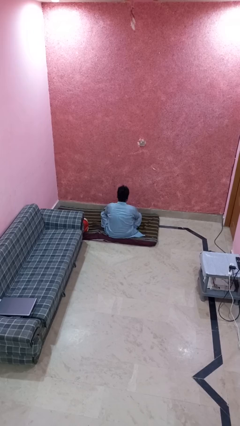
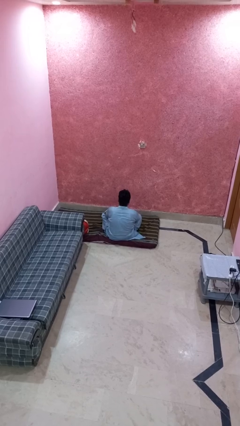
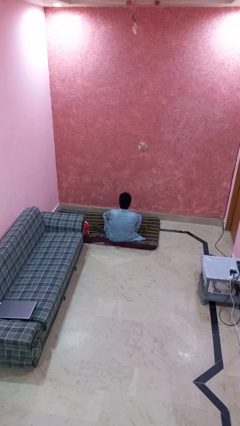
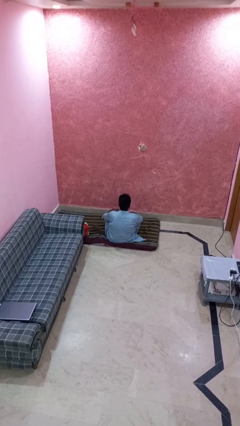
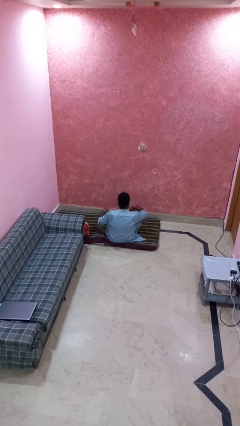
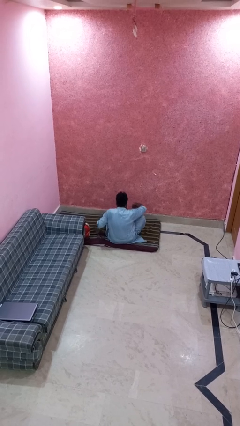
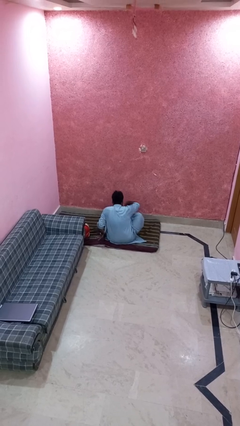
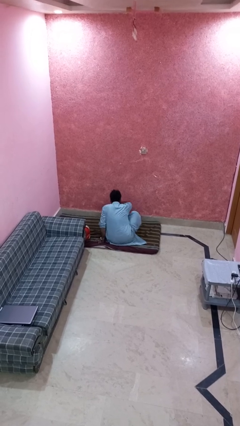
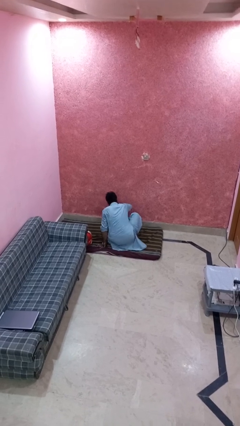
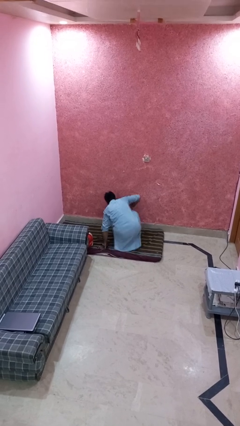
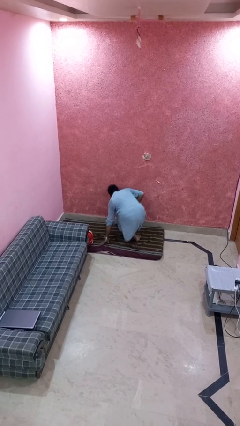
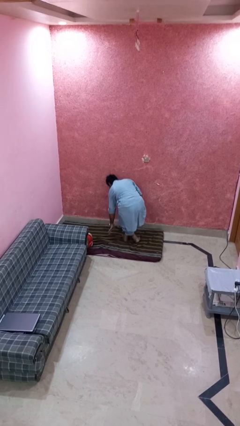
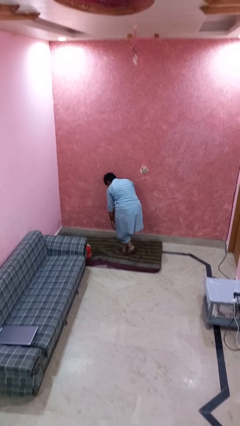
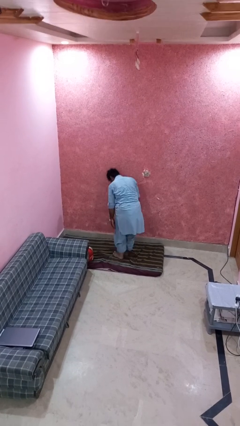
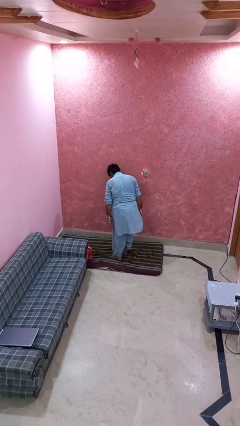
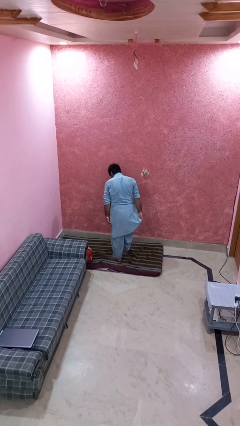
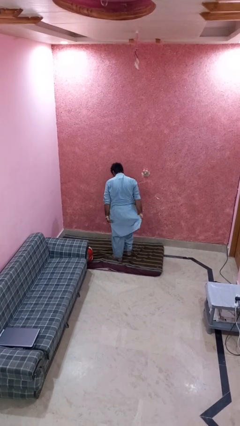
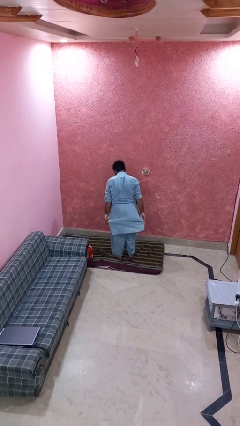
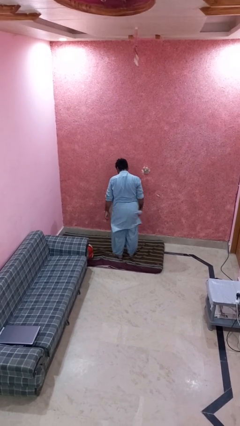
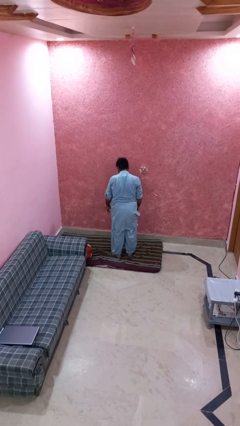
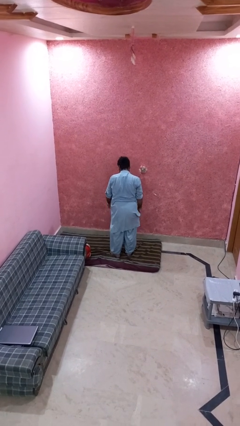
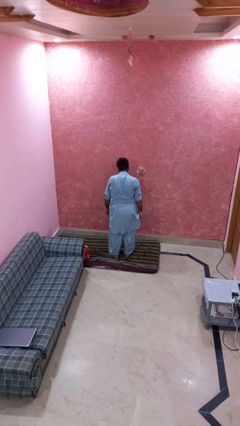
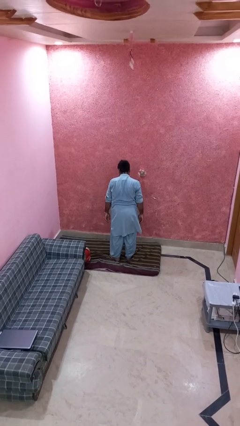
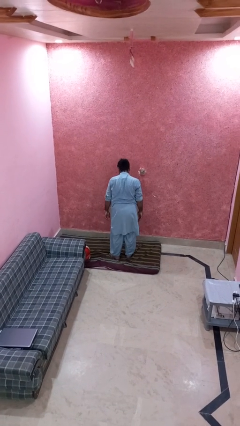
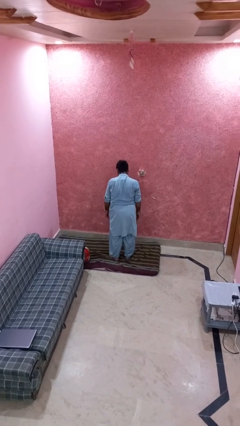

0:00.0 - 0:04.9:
person stands up from floor

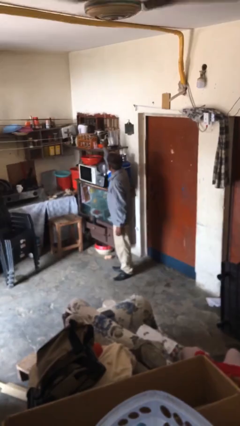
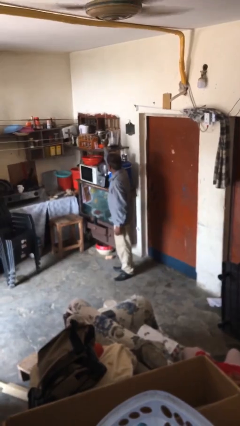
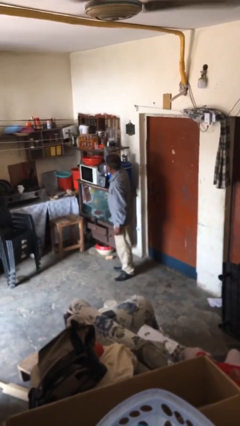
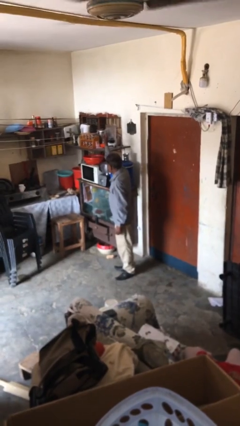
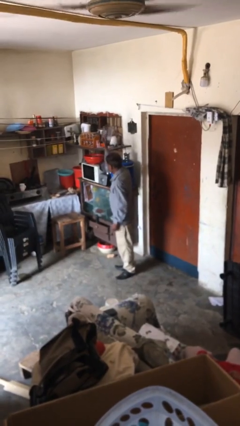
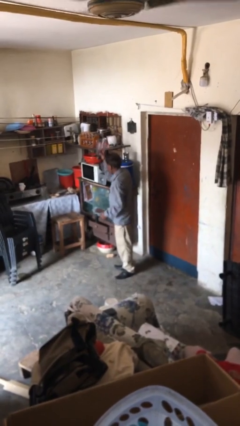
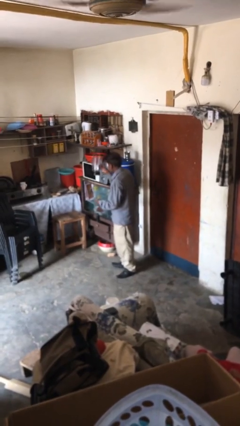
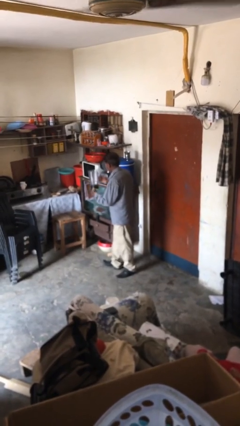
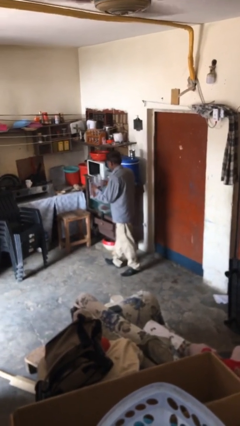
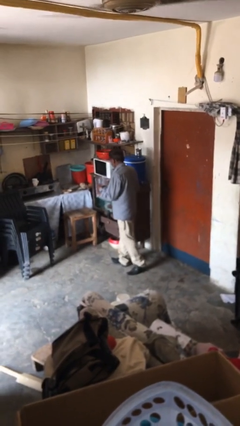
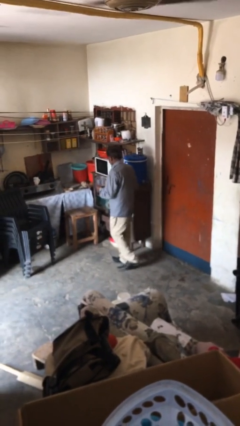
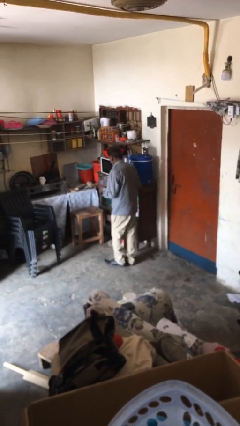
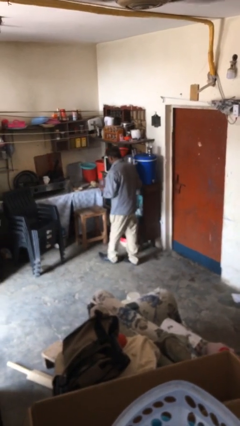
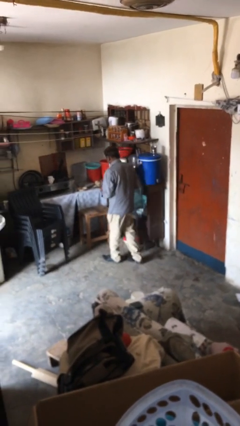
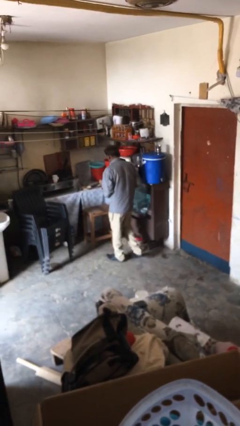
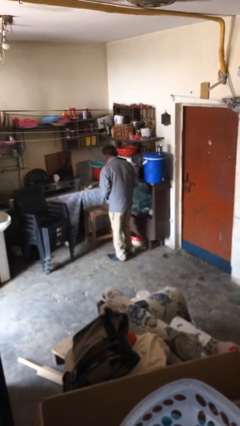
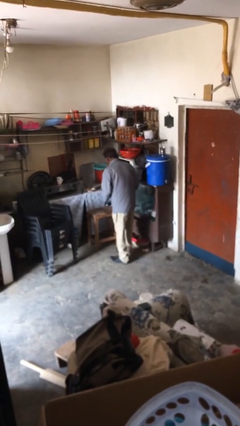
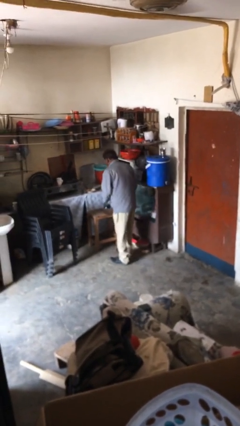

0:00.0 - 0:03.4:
person picks up object from shelf

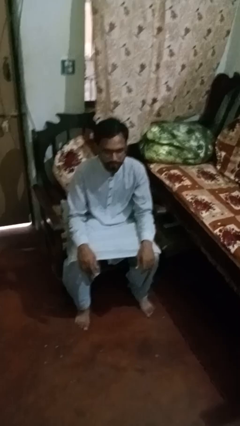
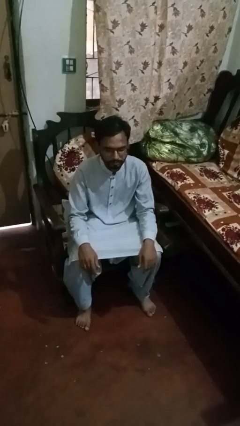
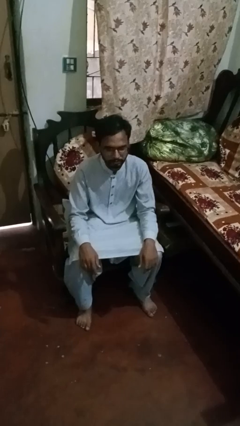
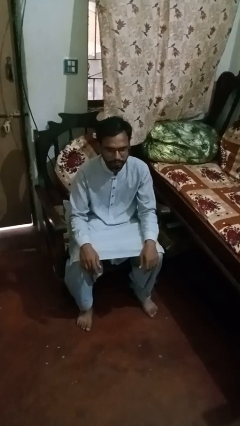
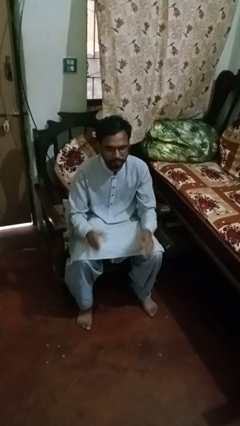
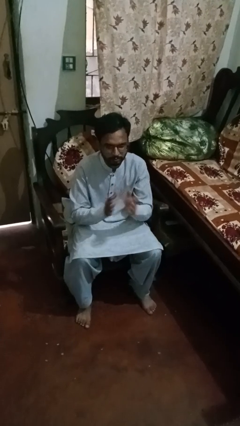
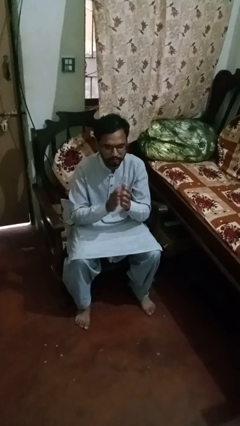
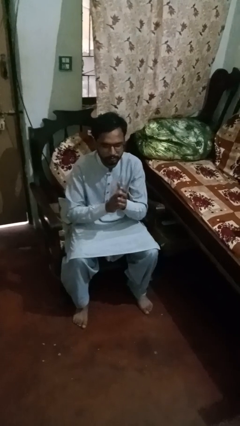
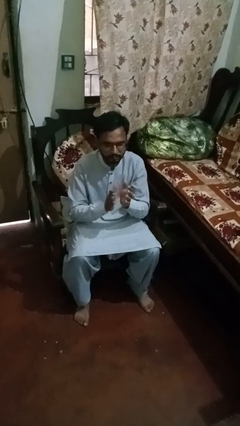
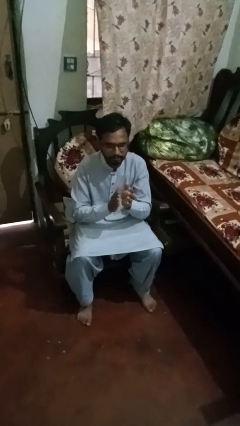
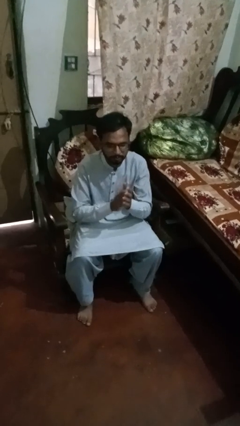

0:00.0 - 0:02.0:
person claps hands

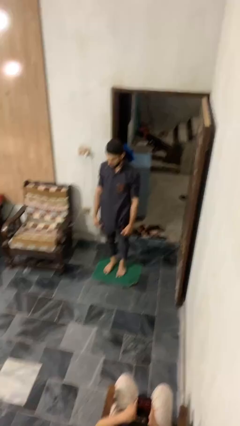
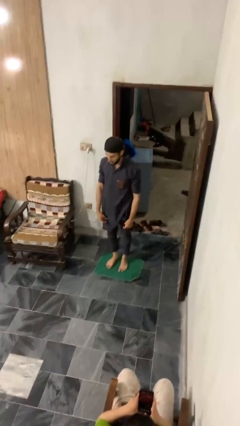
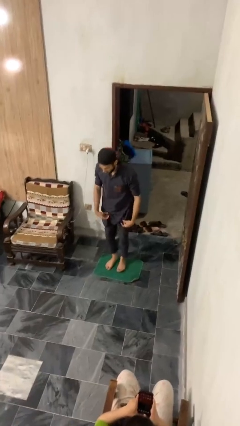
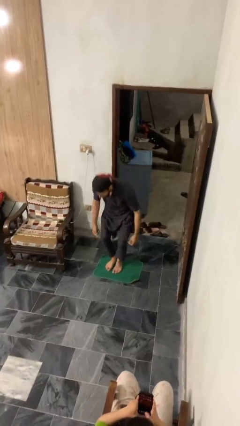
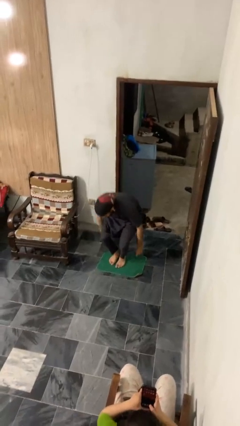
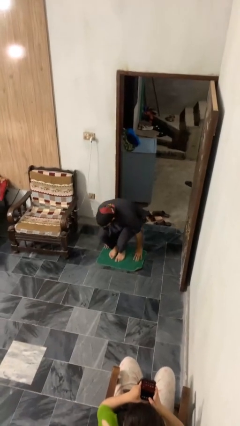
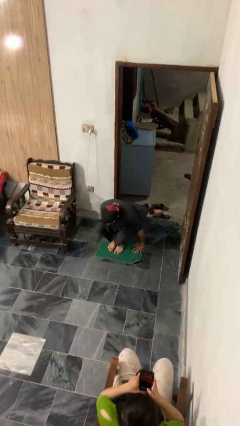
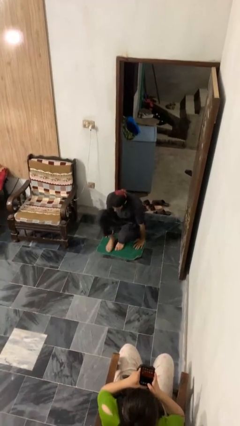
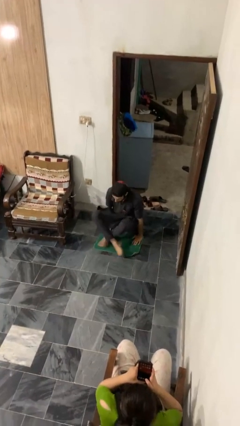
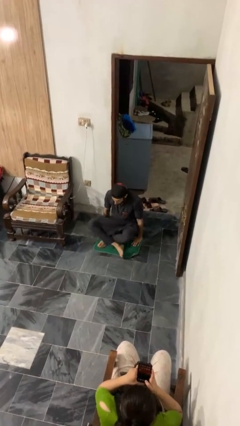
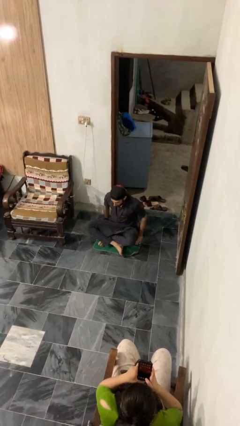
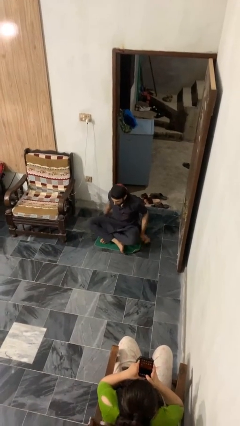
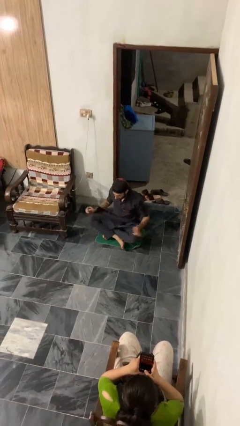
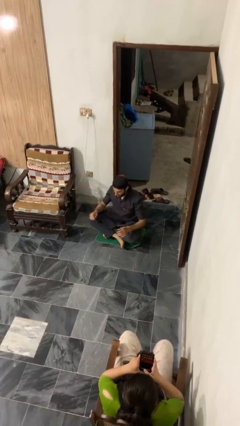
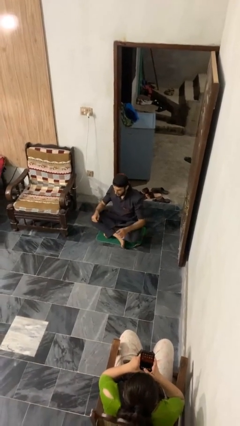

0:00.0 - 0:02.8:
person sits crisscross

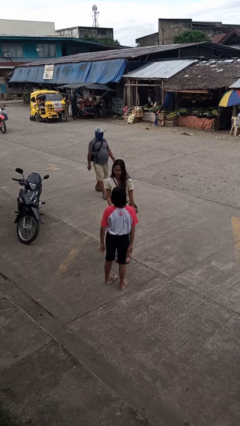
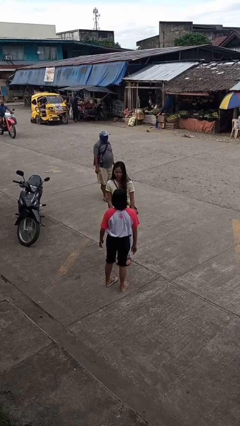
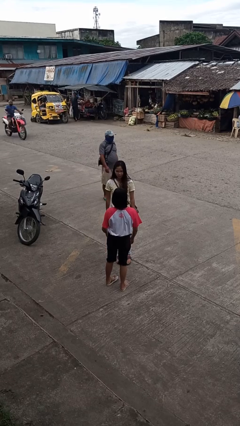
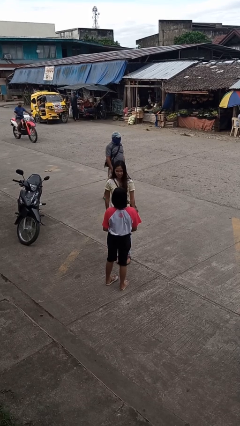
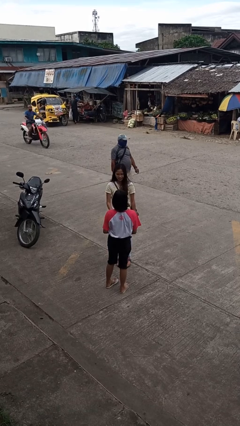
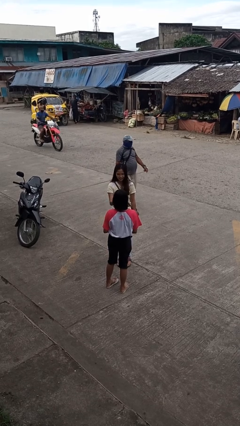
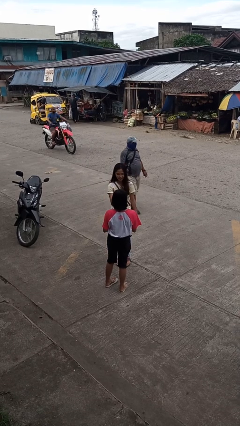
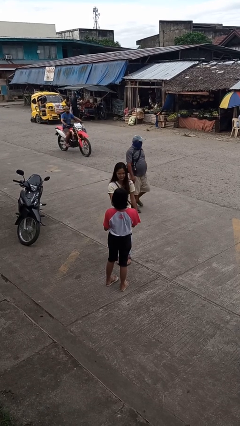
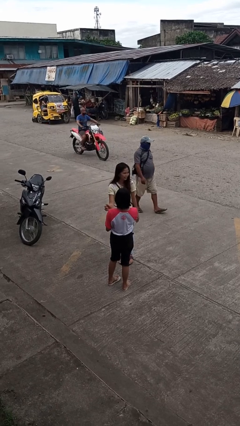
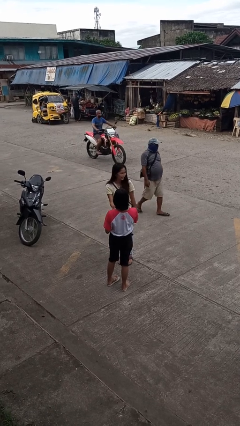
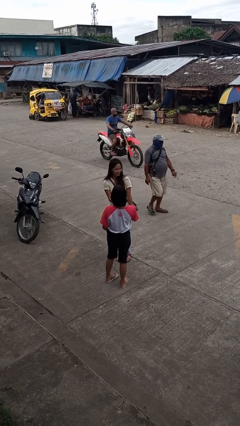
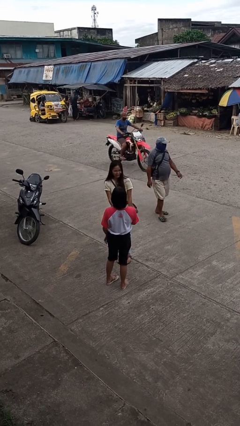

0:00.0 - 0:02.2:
person laughs with person

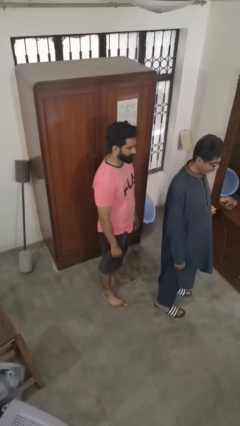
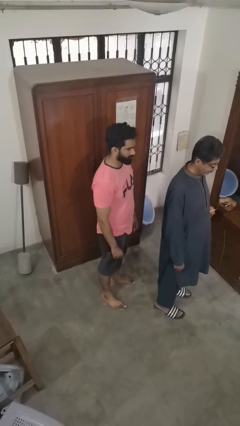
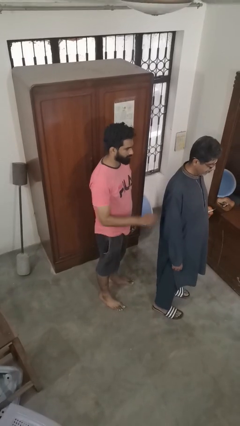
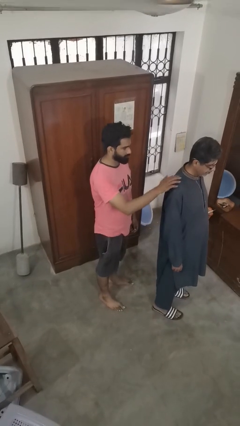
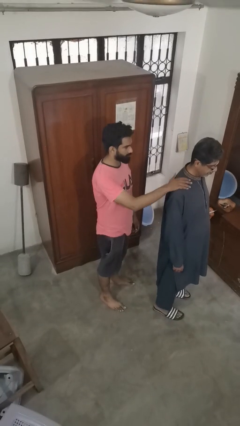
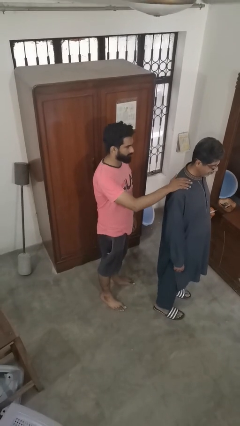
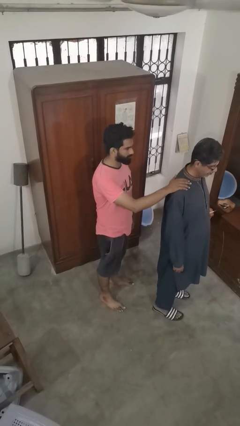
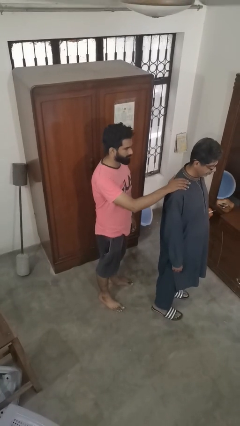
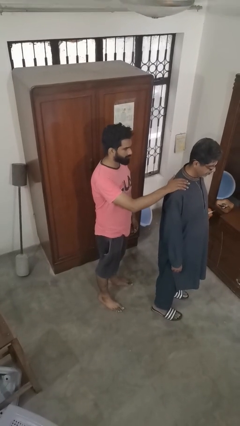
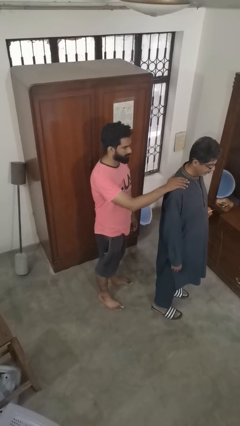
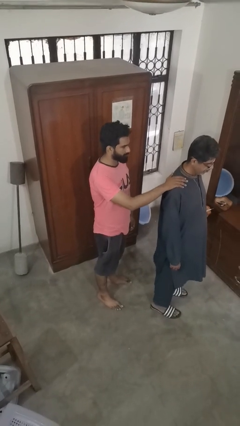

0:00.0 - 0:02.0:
person grabs person by shoulder
